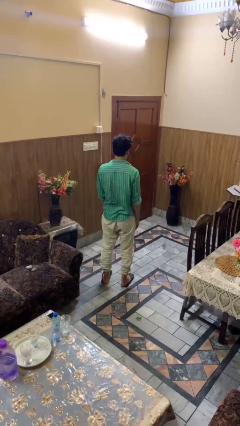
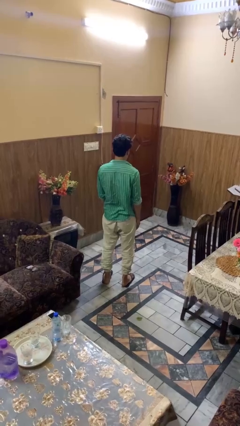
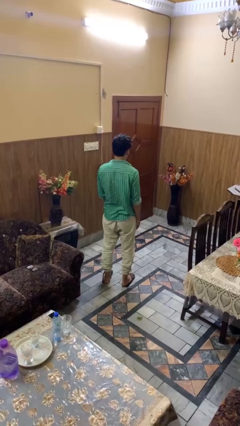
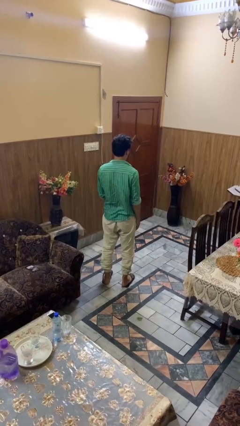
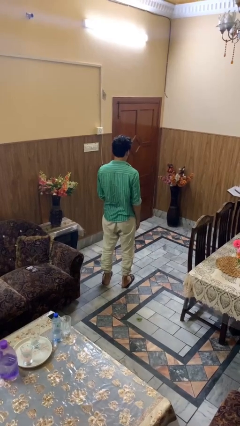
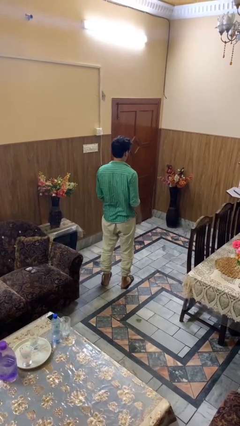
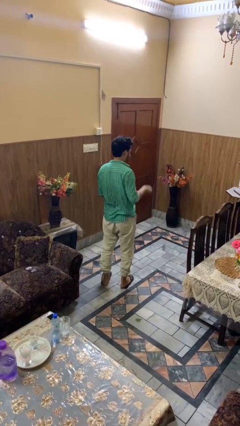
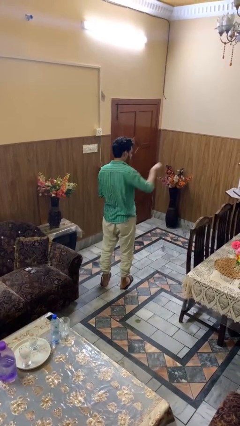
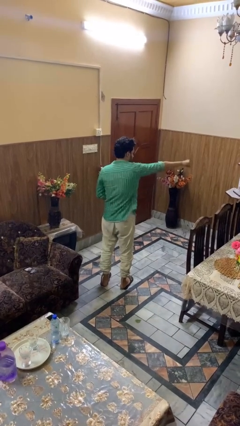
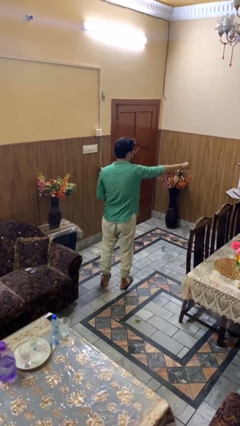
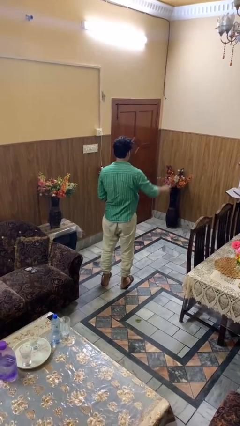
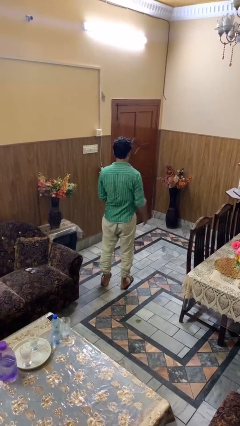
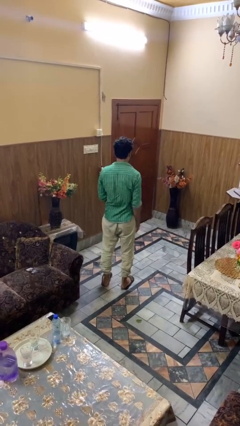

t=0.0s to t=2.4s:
person punches

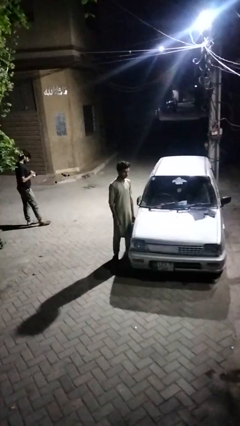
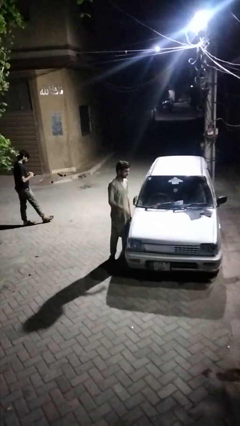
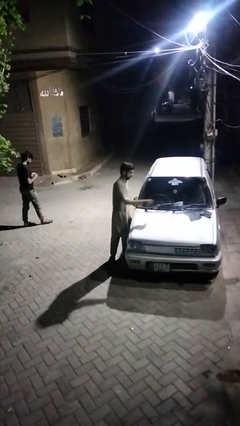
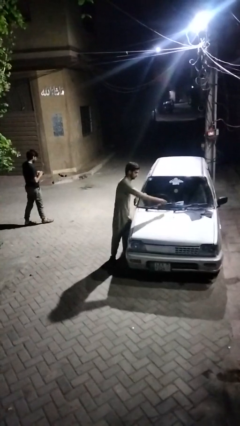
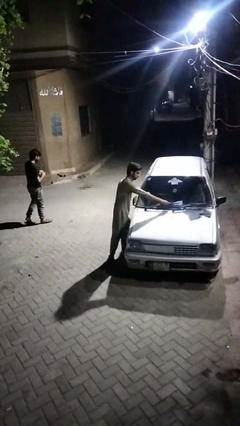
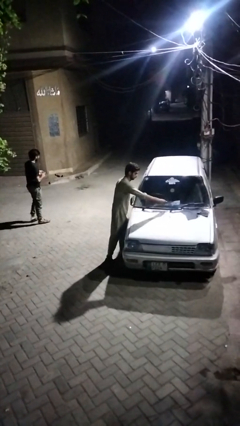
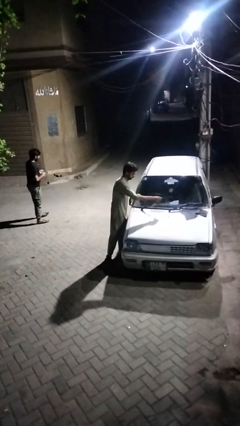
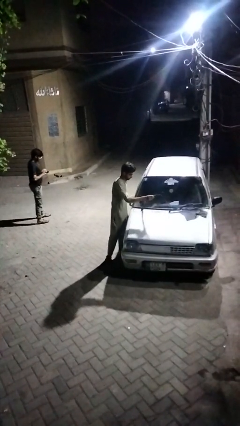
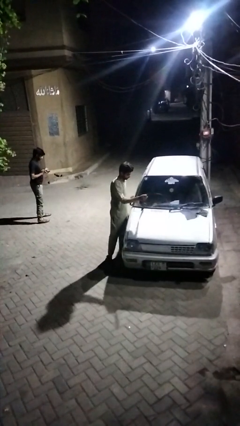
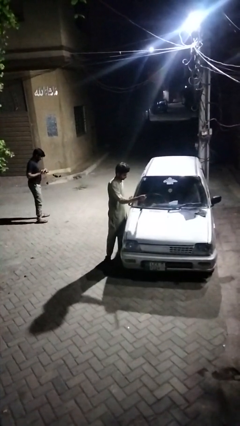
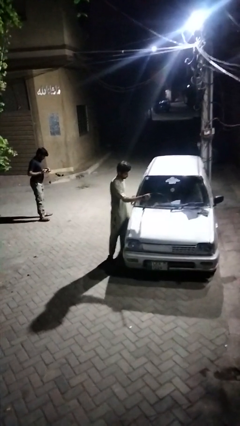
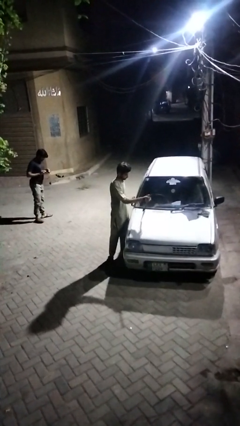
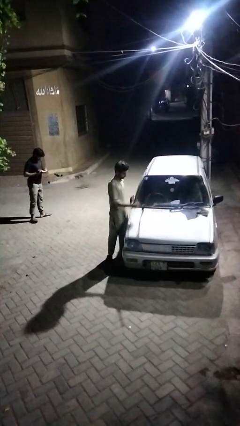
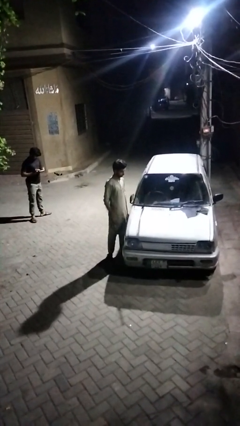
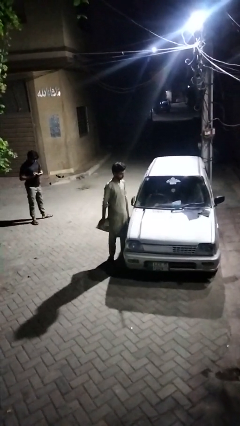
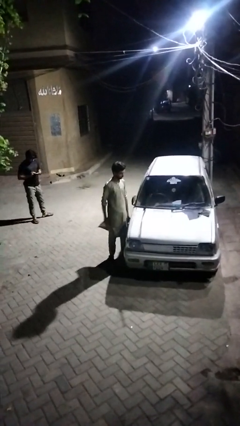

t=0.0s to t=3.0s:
person flips up car wipers

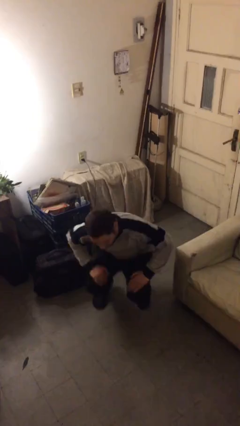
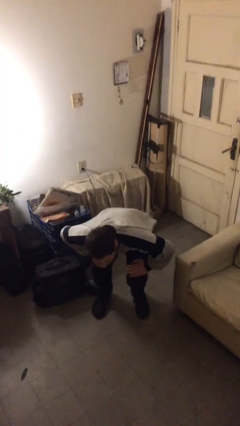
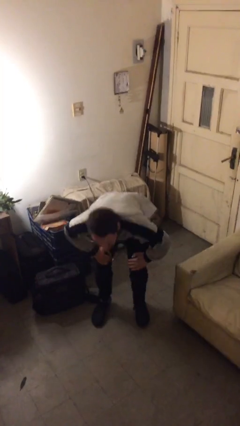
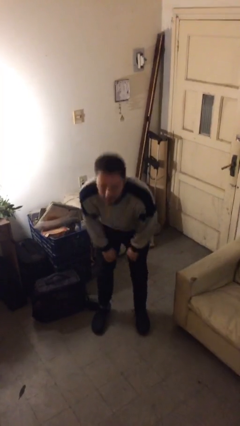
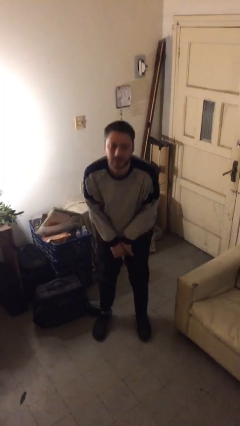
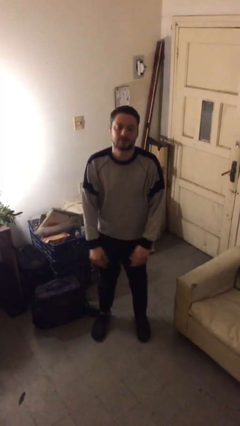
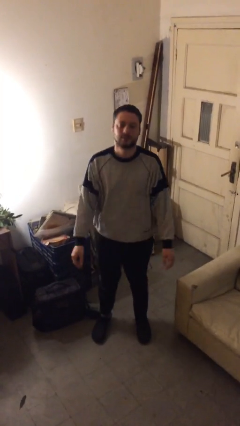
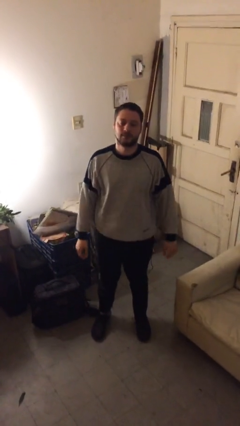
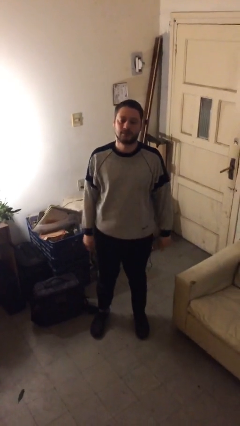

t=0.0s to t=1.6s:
person stands up from floor

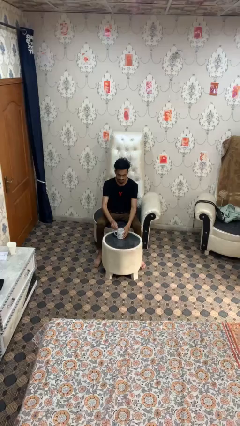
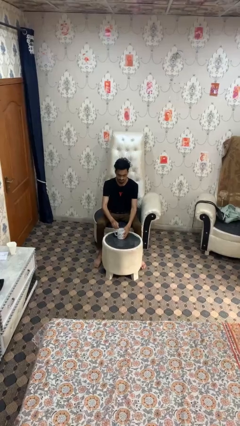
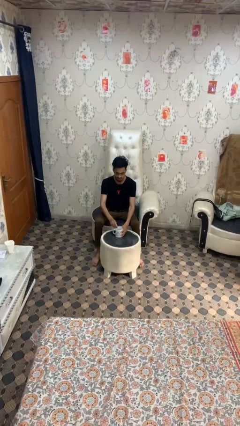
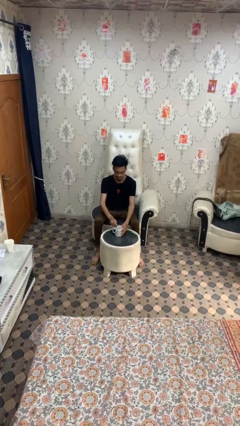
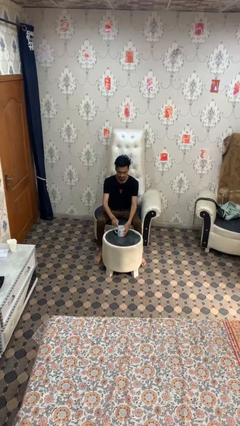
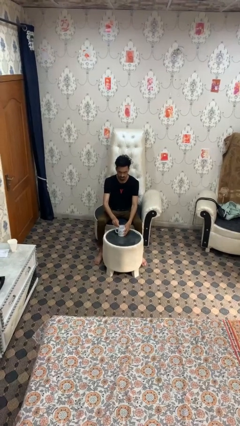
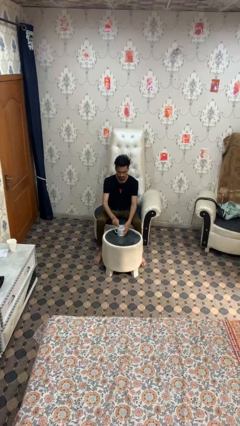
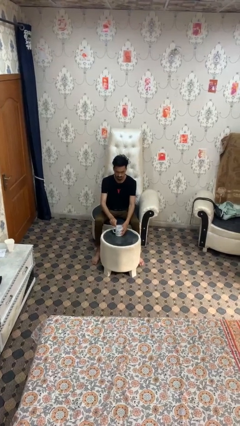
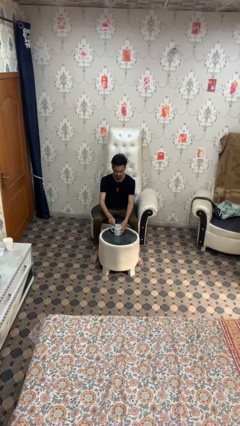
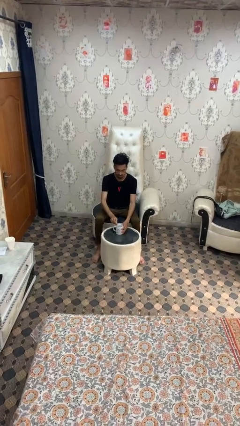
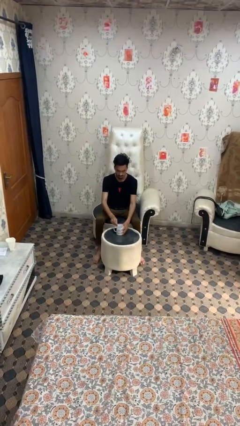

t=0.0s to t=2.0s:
person stirs mug

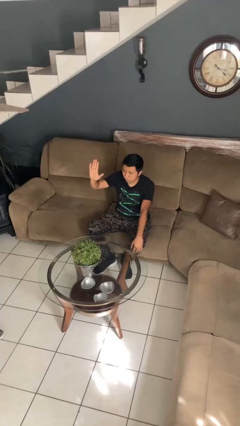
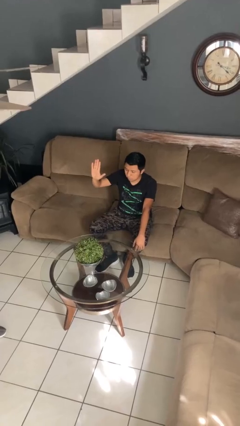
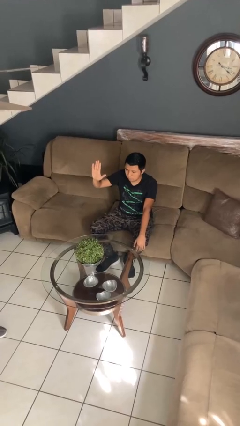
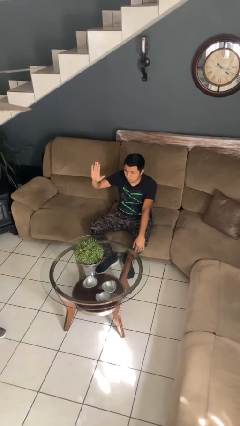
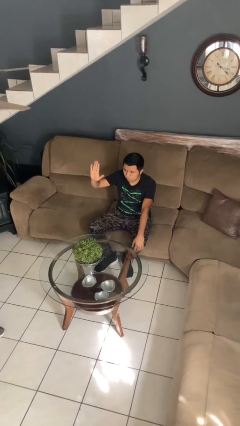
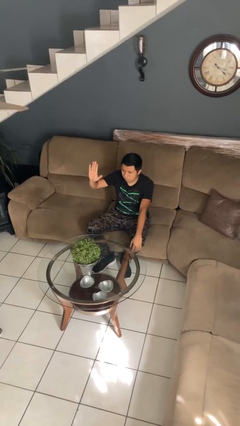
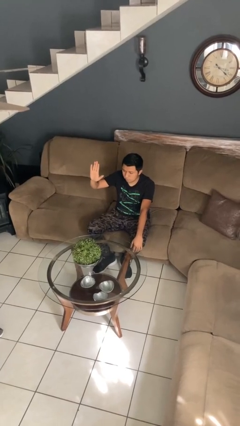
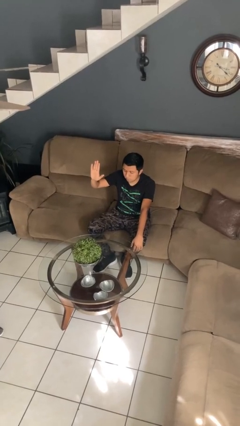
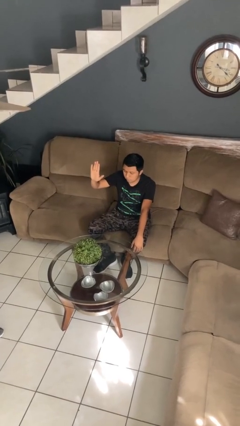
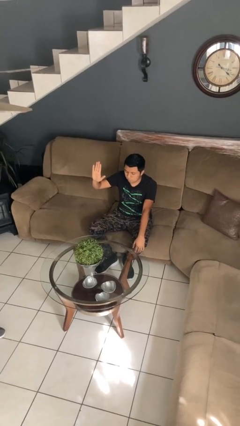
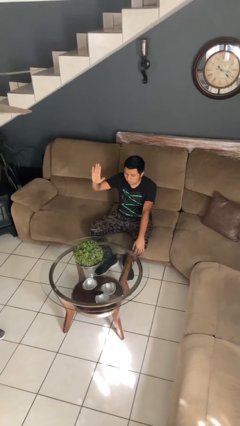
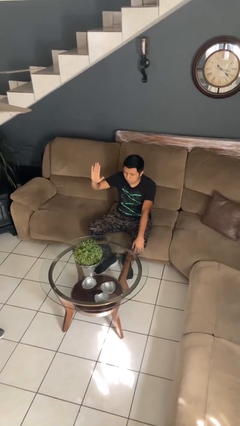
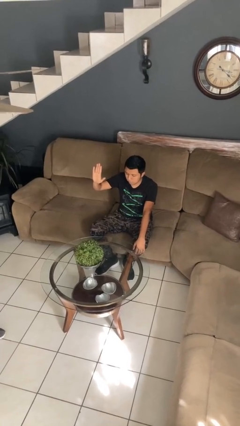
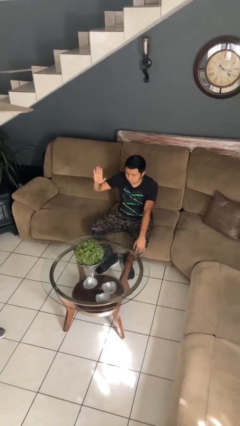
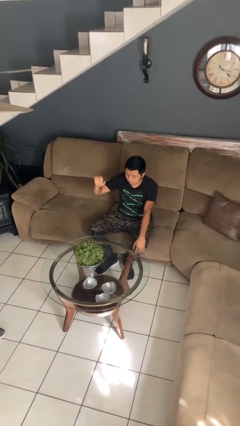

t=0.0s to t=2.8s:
person gestures stop

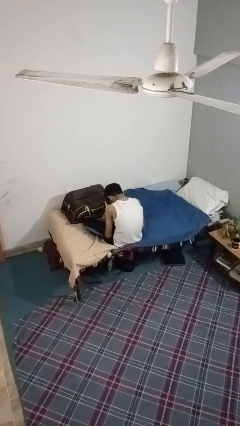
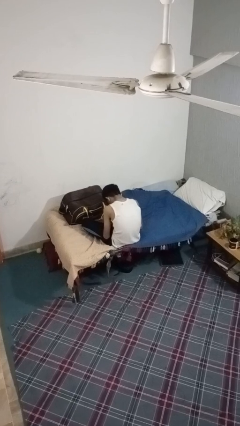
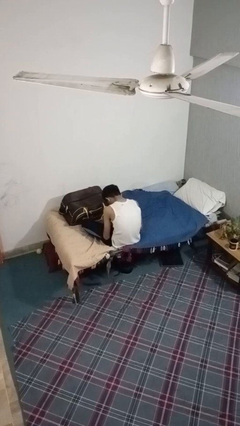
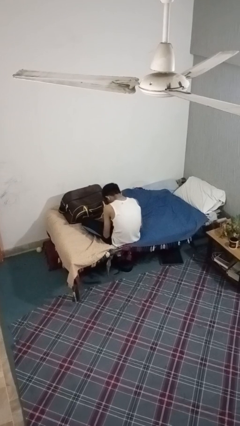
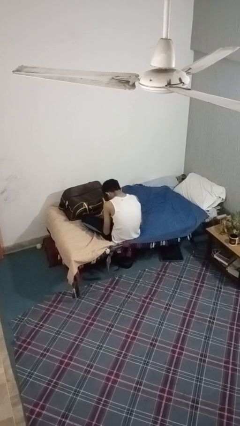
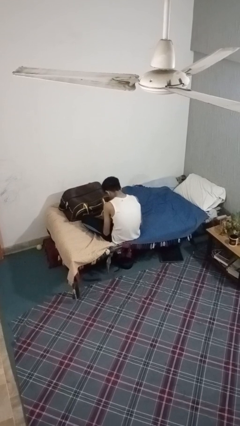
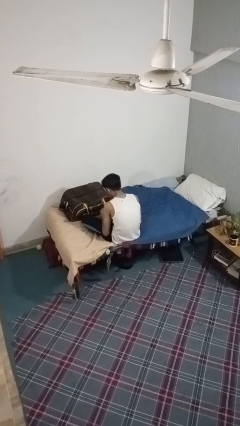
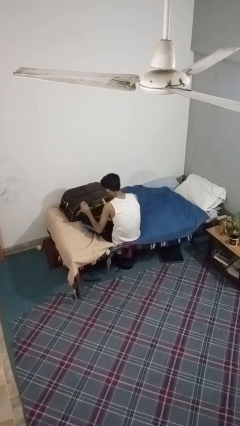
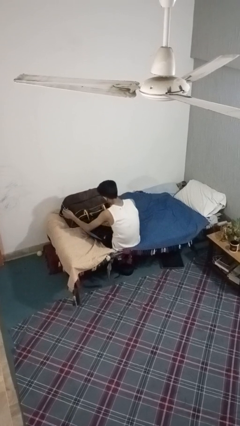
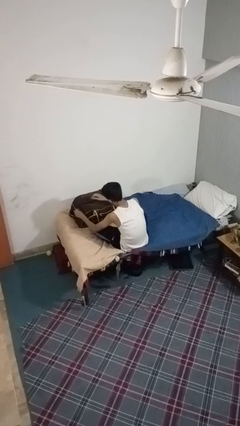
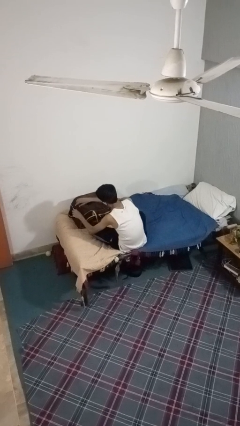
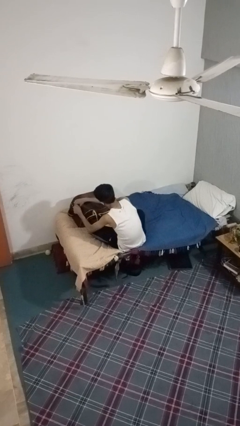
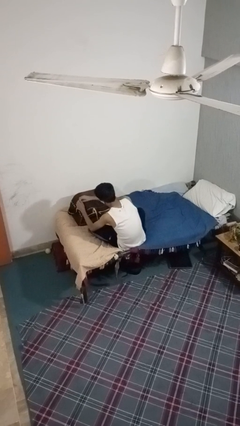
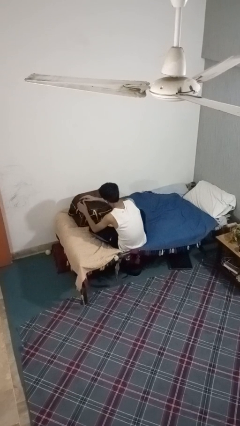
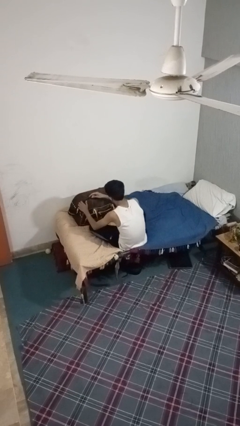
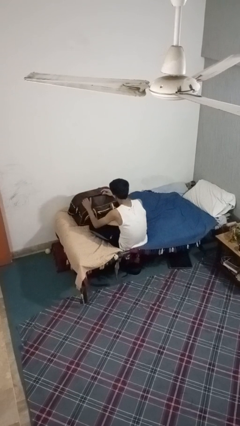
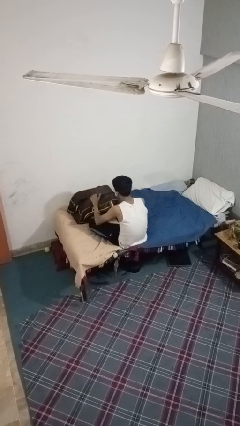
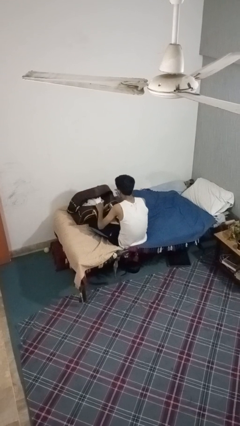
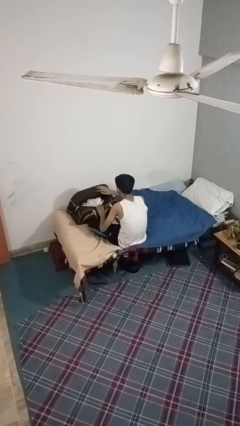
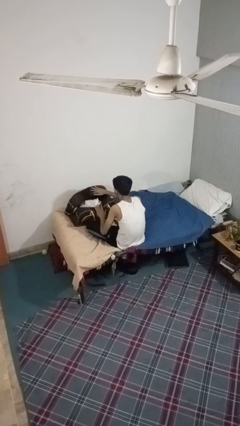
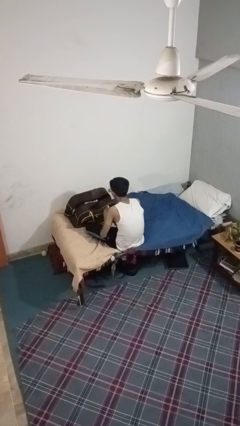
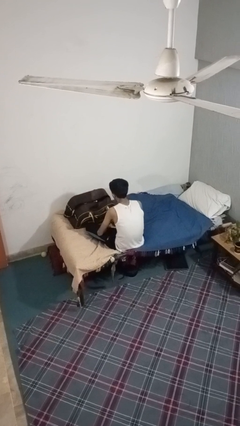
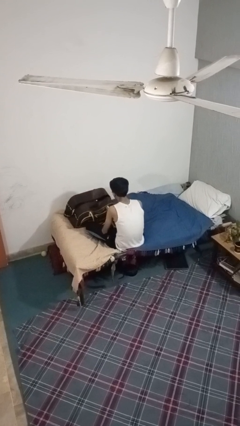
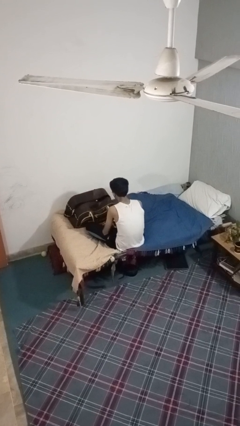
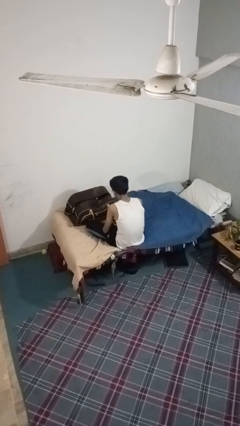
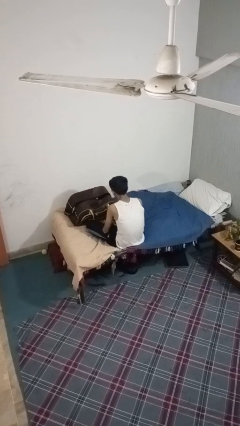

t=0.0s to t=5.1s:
person opens suitcase
